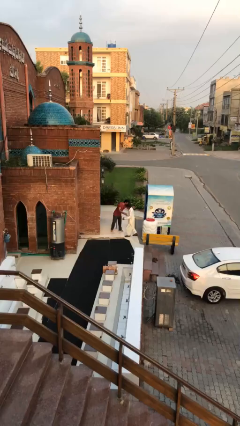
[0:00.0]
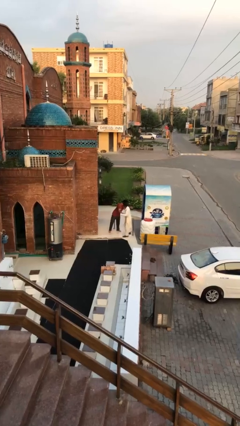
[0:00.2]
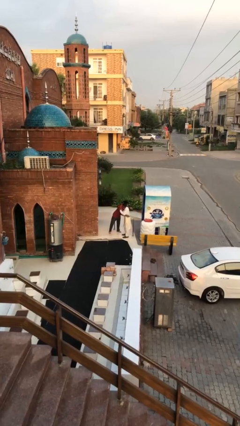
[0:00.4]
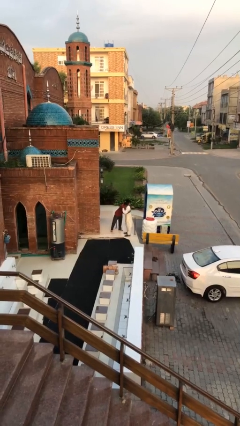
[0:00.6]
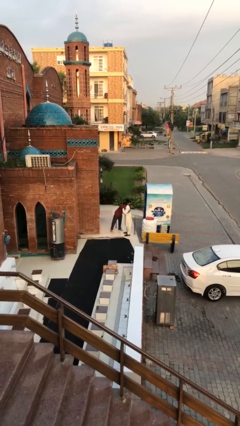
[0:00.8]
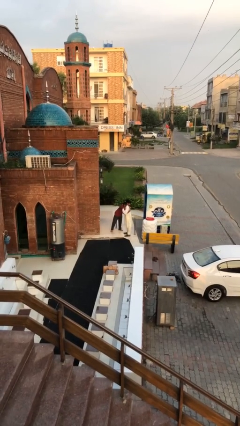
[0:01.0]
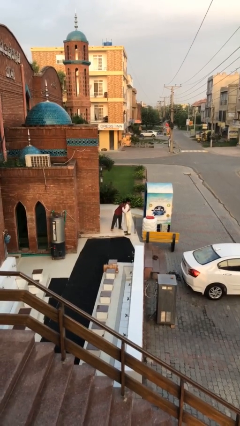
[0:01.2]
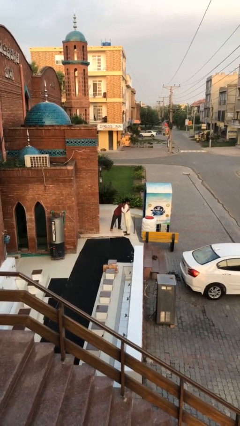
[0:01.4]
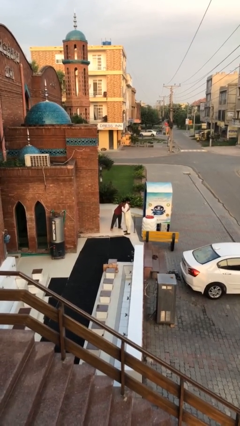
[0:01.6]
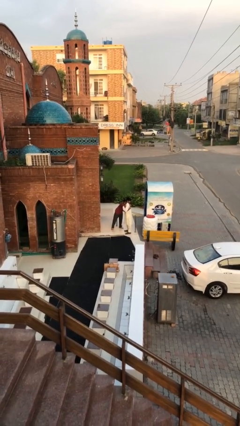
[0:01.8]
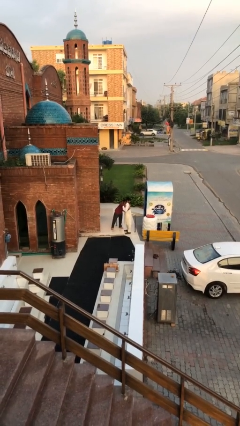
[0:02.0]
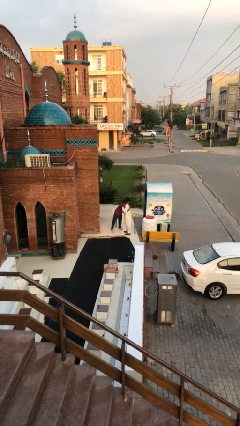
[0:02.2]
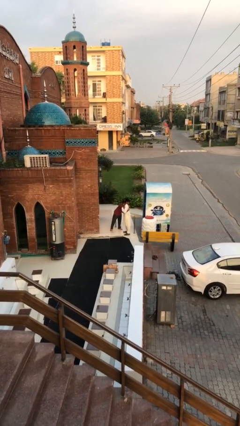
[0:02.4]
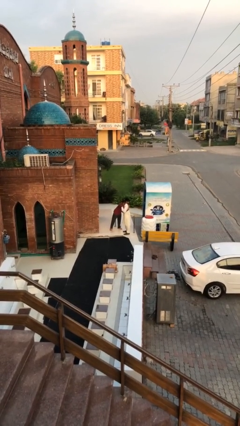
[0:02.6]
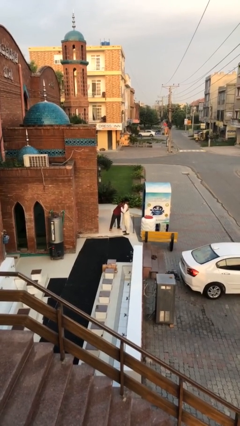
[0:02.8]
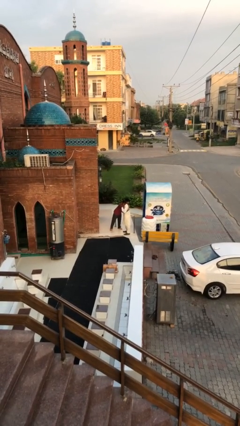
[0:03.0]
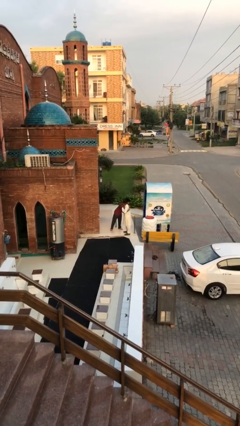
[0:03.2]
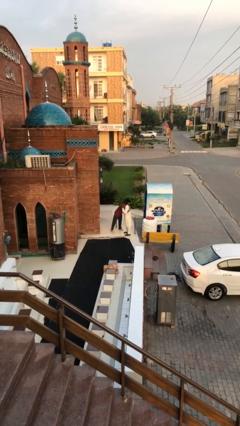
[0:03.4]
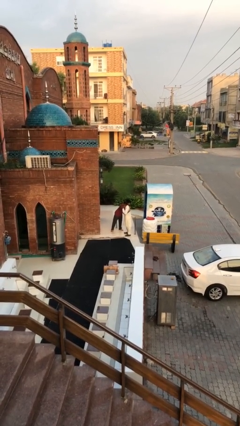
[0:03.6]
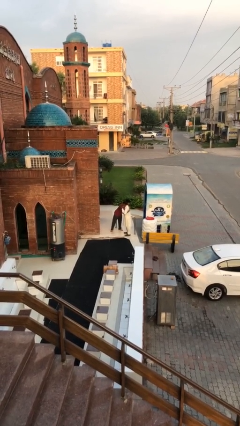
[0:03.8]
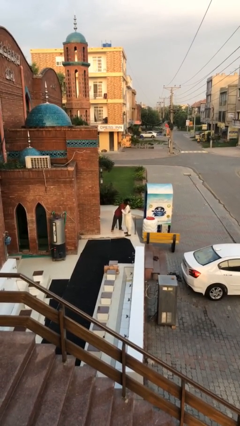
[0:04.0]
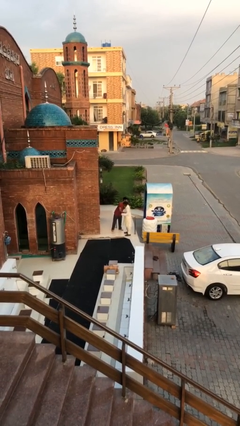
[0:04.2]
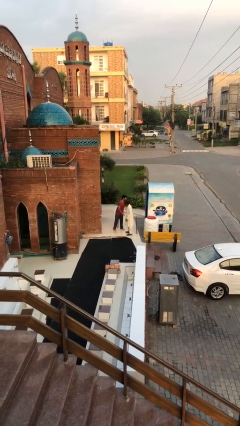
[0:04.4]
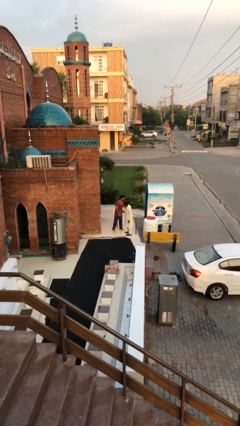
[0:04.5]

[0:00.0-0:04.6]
person embraces person

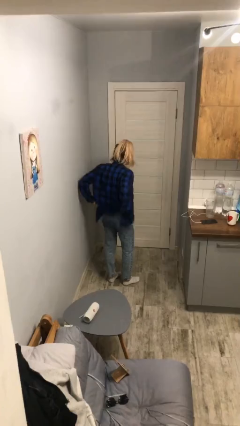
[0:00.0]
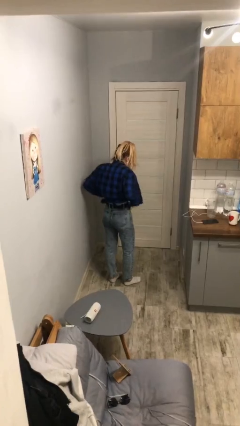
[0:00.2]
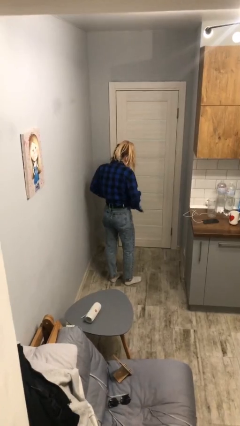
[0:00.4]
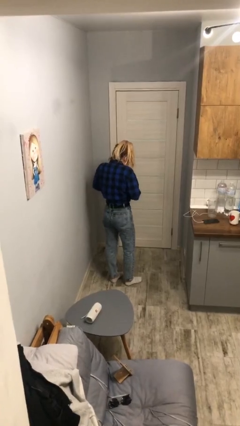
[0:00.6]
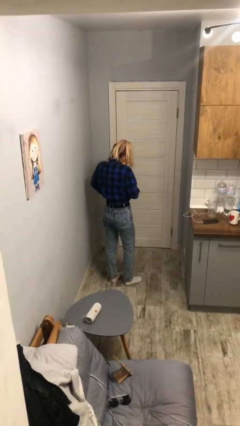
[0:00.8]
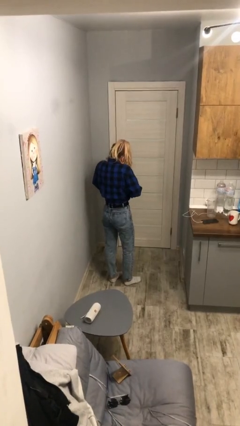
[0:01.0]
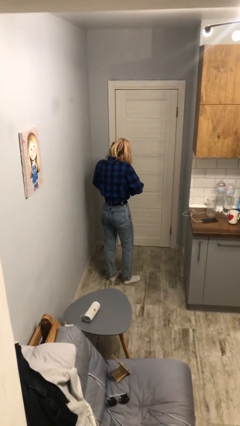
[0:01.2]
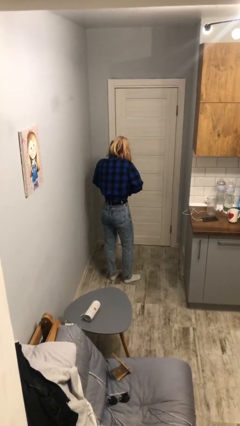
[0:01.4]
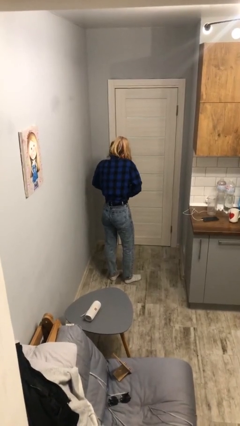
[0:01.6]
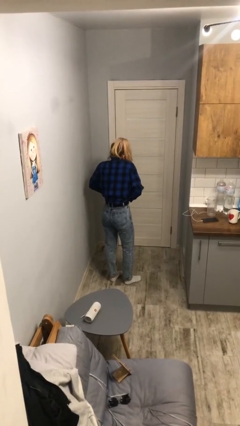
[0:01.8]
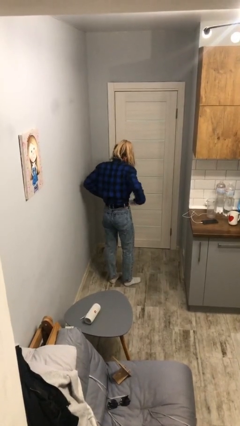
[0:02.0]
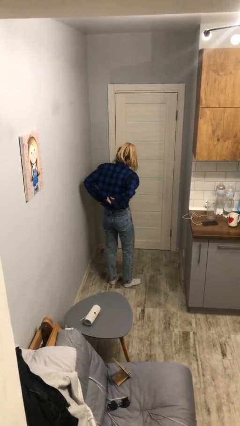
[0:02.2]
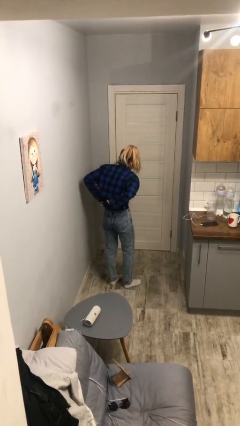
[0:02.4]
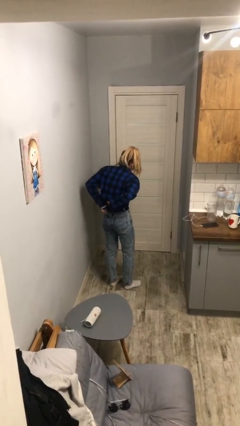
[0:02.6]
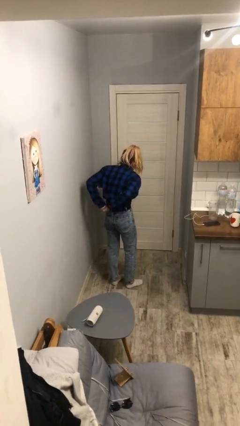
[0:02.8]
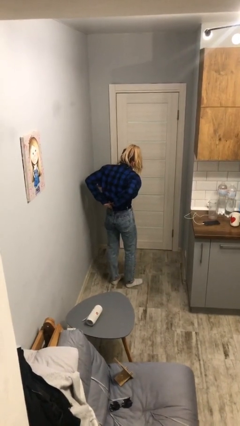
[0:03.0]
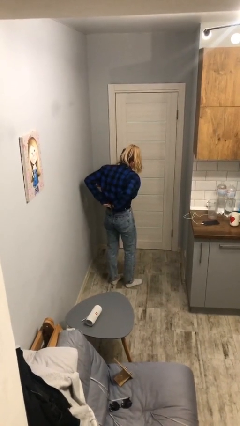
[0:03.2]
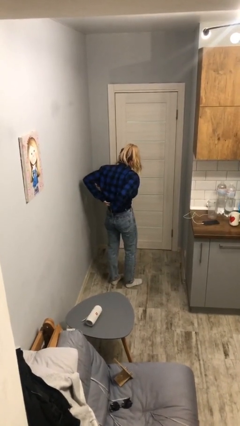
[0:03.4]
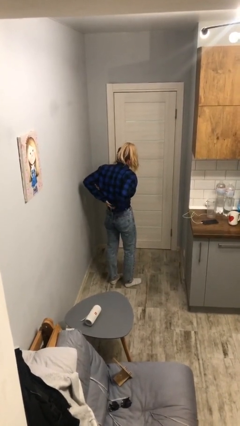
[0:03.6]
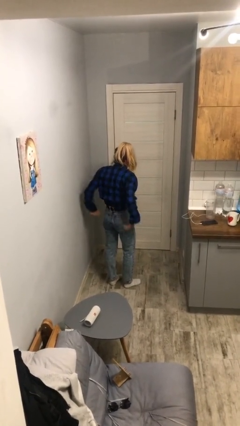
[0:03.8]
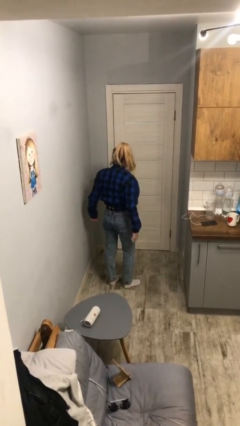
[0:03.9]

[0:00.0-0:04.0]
person tucks in shirt

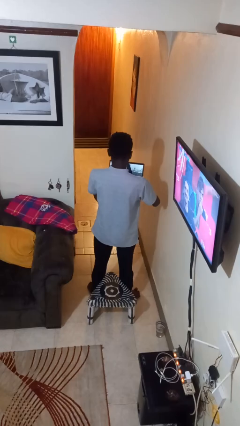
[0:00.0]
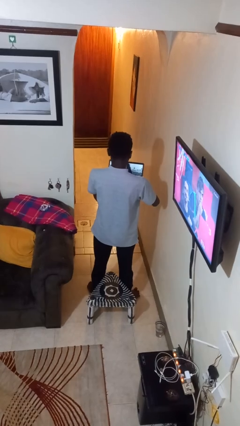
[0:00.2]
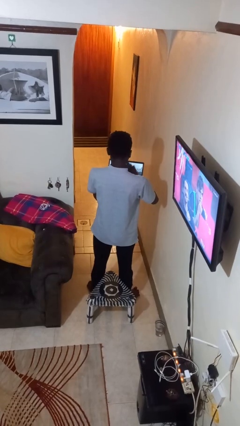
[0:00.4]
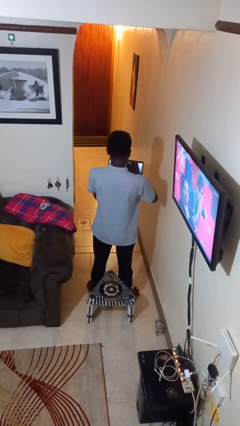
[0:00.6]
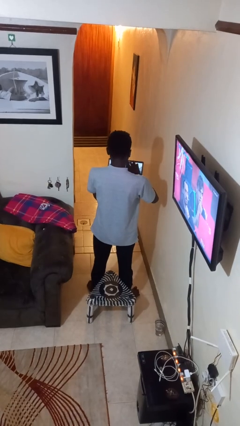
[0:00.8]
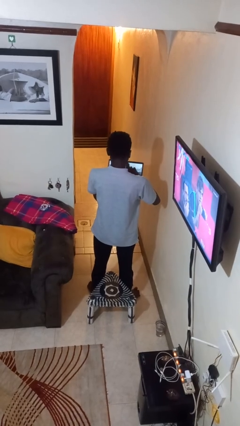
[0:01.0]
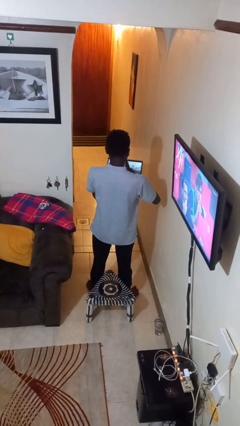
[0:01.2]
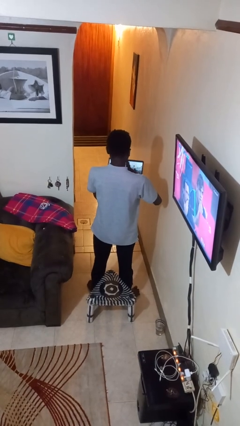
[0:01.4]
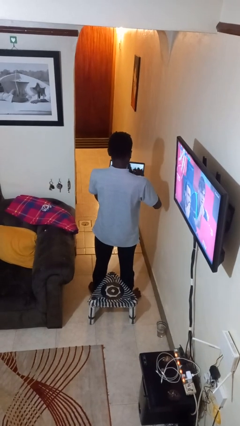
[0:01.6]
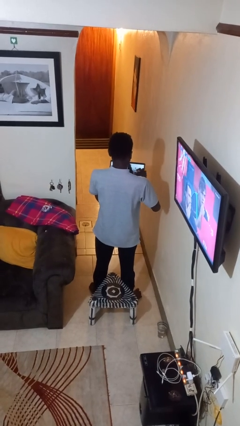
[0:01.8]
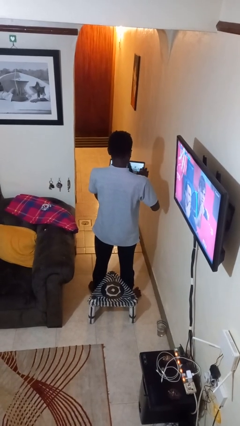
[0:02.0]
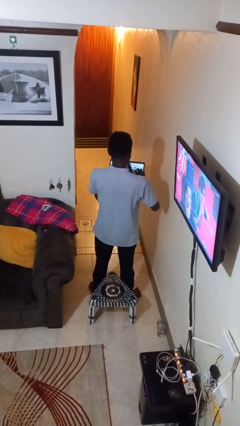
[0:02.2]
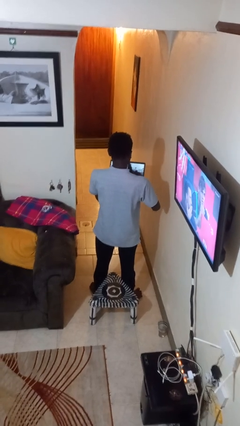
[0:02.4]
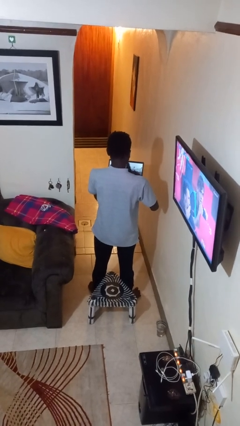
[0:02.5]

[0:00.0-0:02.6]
person interacts with tablet

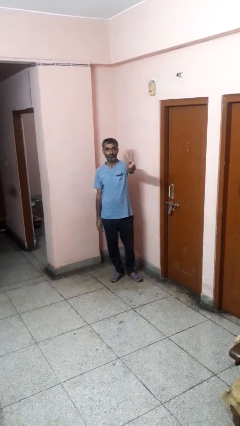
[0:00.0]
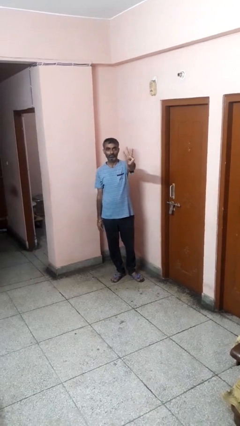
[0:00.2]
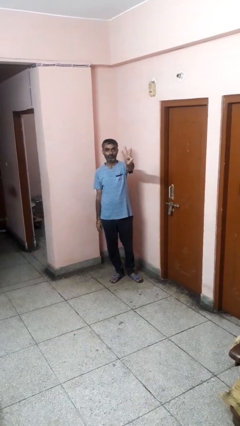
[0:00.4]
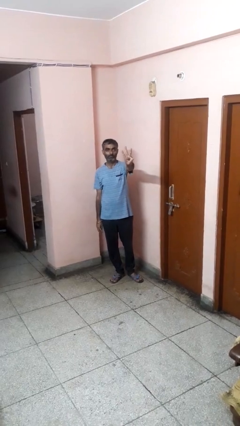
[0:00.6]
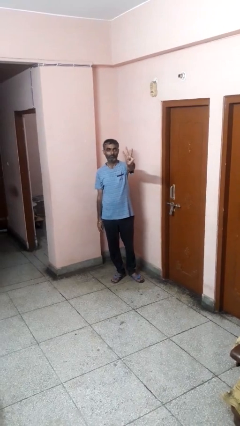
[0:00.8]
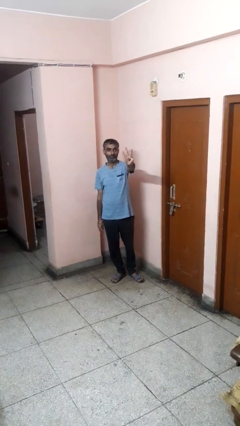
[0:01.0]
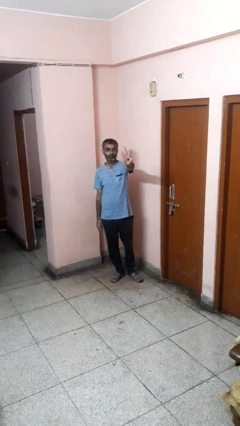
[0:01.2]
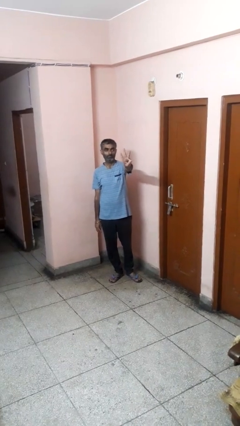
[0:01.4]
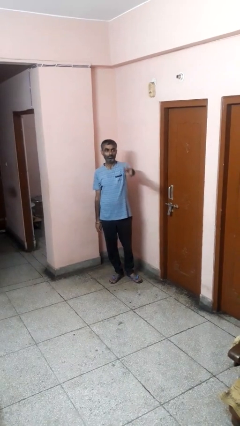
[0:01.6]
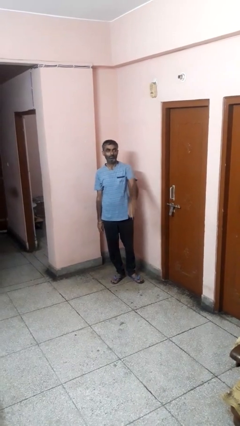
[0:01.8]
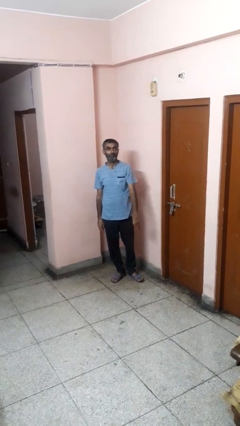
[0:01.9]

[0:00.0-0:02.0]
person gestures number three

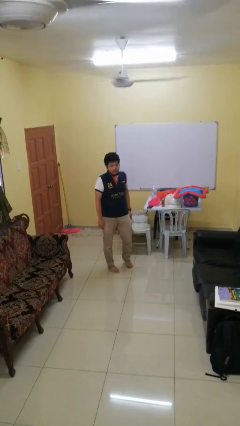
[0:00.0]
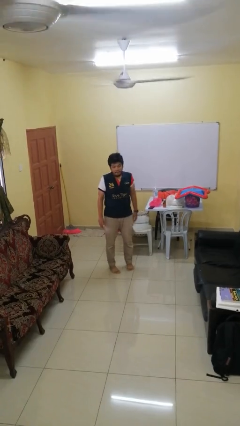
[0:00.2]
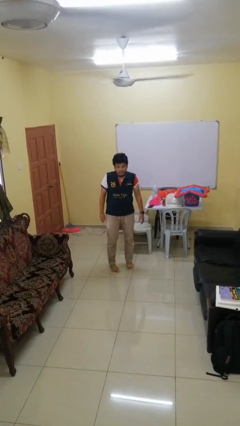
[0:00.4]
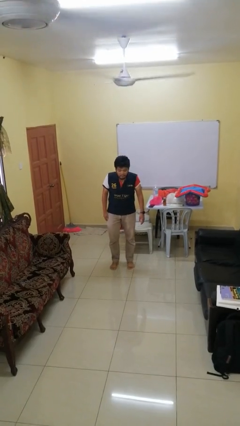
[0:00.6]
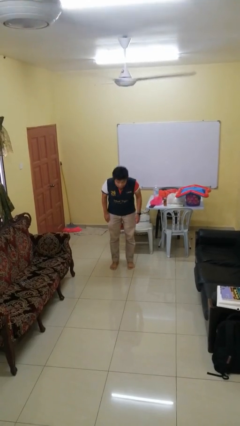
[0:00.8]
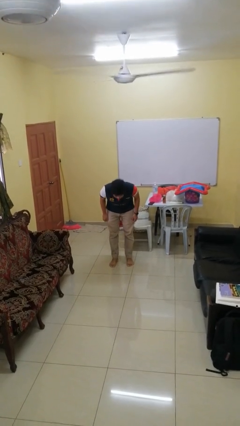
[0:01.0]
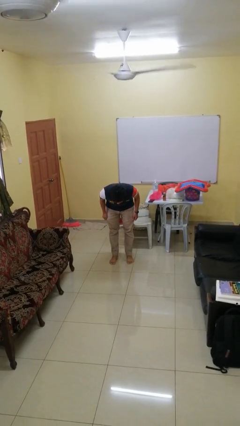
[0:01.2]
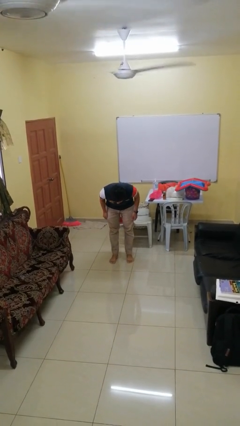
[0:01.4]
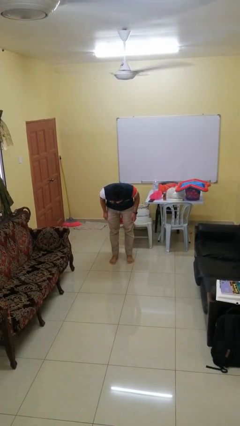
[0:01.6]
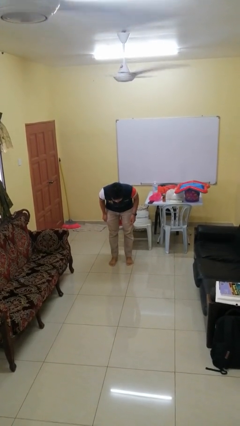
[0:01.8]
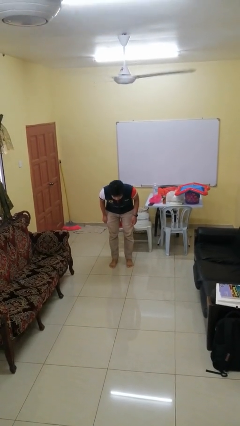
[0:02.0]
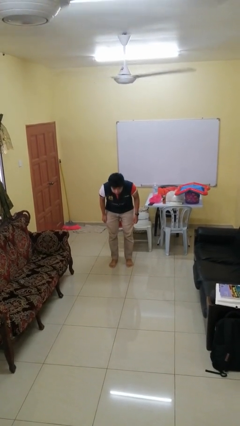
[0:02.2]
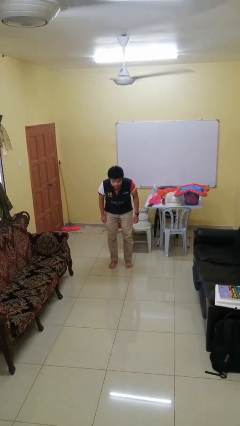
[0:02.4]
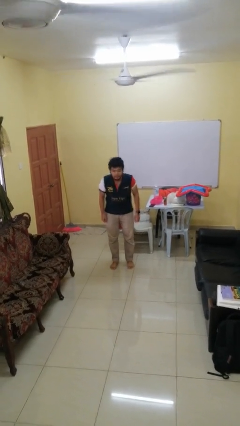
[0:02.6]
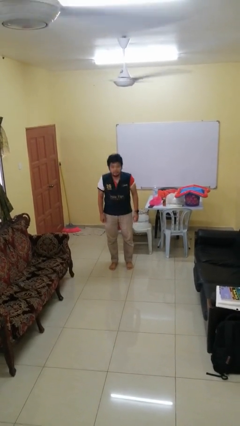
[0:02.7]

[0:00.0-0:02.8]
person bows

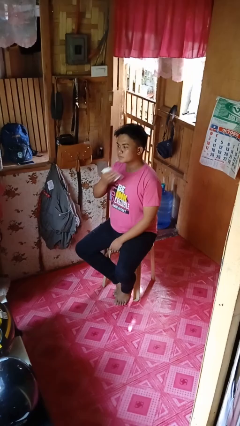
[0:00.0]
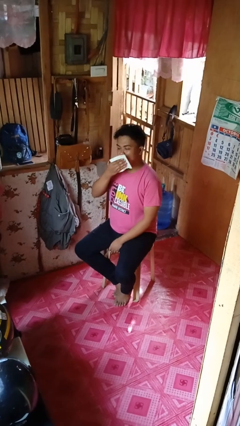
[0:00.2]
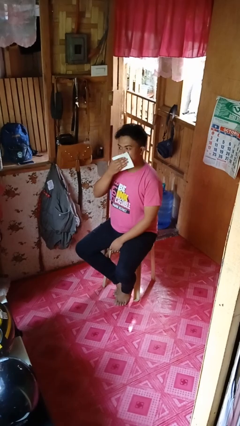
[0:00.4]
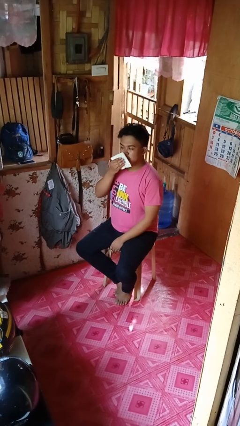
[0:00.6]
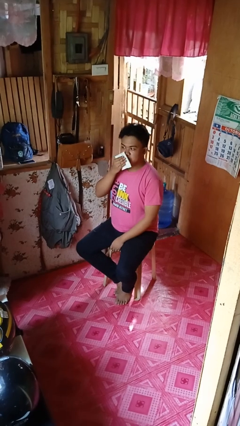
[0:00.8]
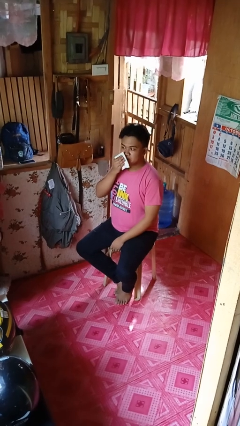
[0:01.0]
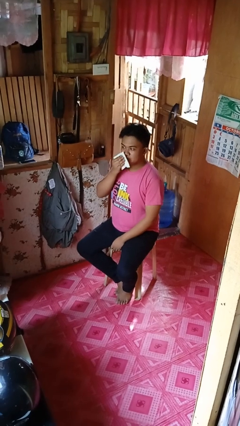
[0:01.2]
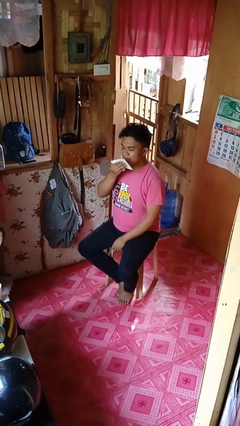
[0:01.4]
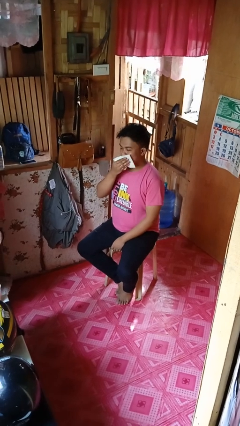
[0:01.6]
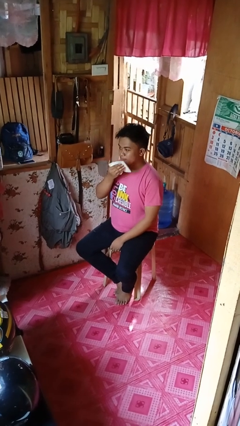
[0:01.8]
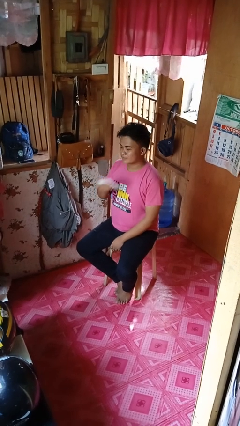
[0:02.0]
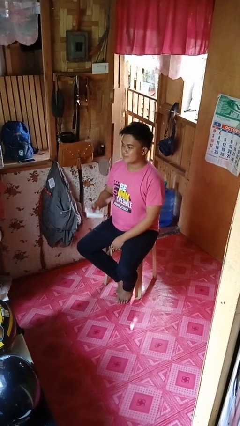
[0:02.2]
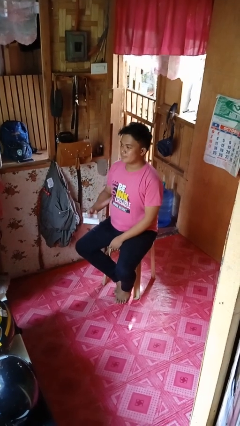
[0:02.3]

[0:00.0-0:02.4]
person wipes mouth with napkin
